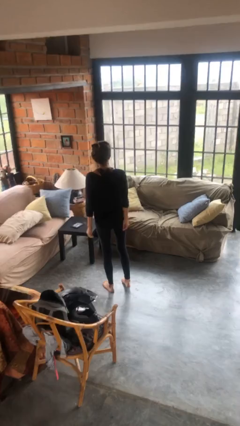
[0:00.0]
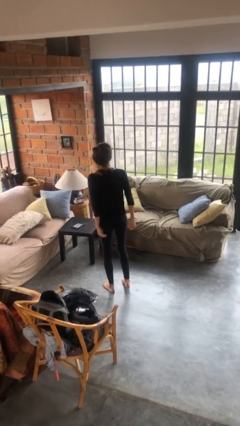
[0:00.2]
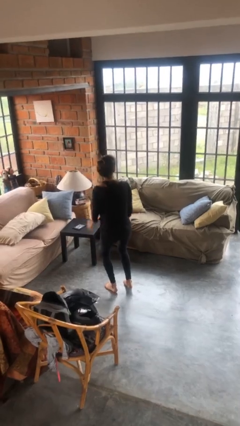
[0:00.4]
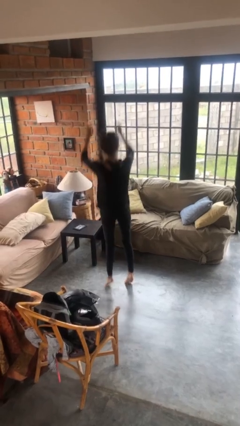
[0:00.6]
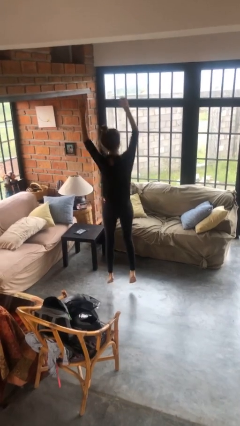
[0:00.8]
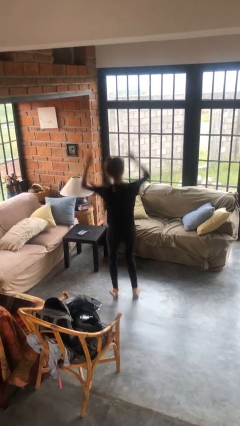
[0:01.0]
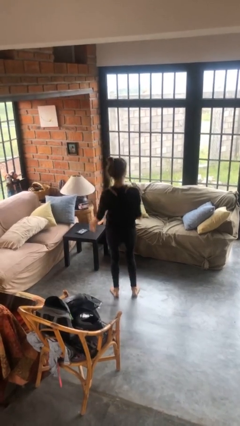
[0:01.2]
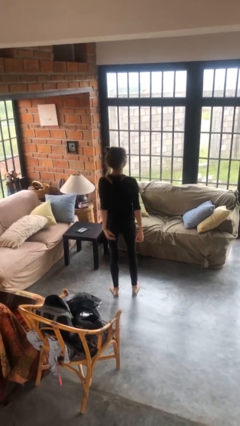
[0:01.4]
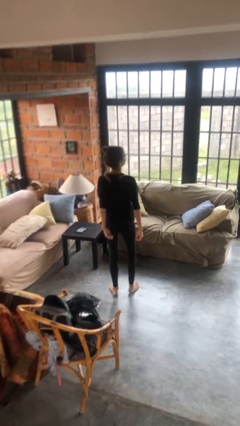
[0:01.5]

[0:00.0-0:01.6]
person jumps

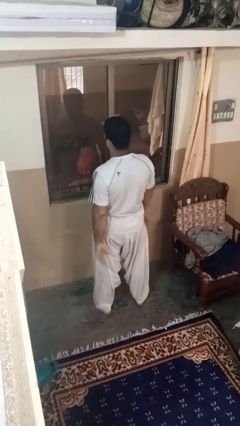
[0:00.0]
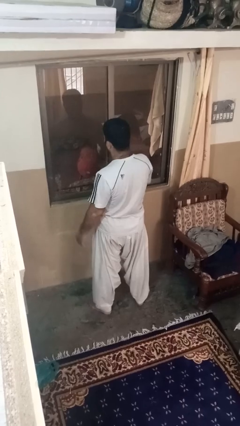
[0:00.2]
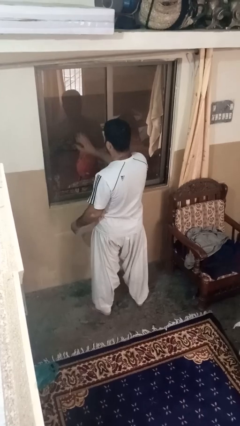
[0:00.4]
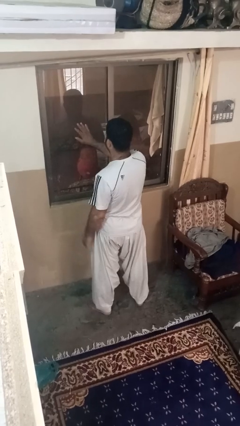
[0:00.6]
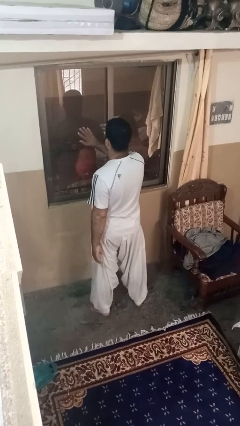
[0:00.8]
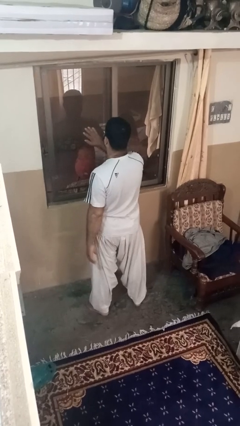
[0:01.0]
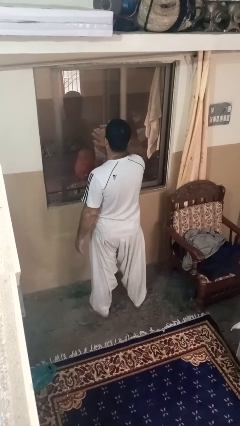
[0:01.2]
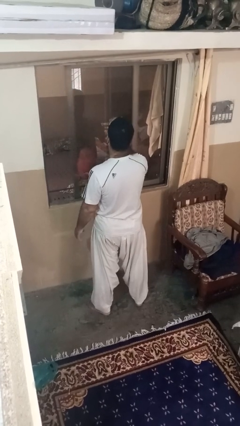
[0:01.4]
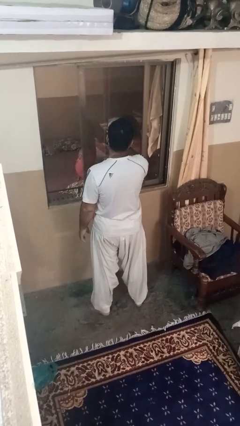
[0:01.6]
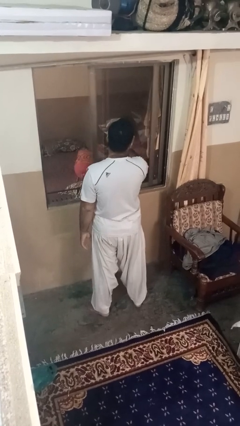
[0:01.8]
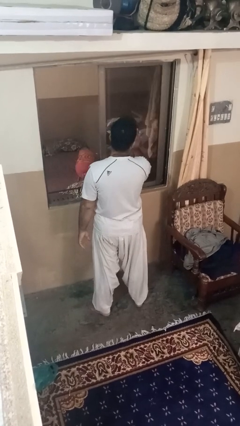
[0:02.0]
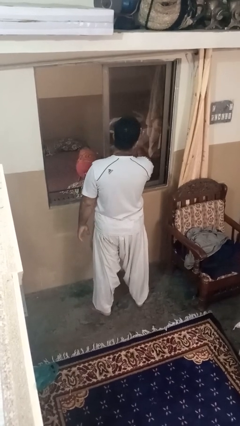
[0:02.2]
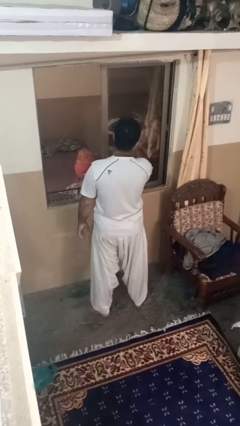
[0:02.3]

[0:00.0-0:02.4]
person opens home window

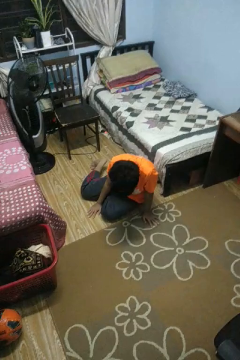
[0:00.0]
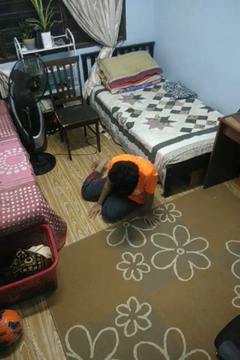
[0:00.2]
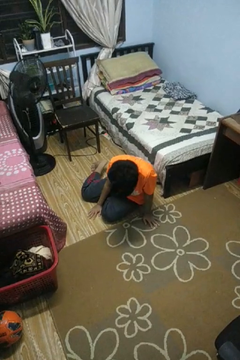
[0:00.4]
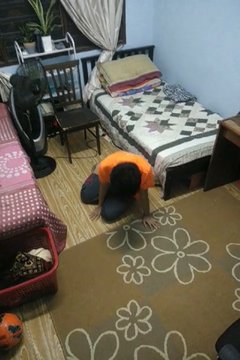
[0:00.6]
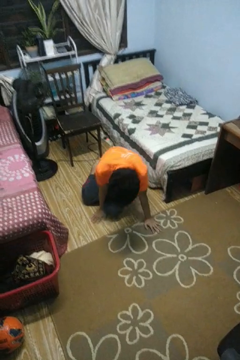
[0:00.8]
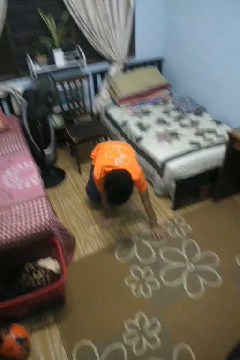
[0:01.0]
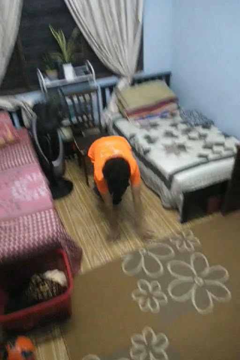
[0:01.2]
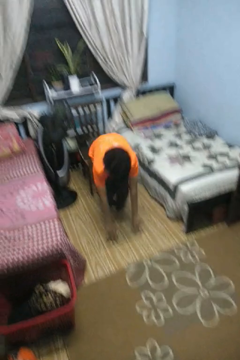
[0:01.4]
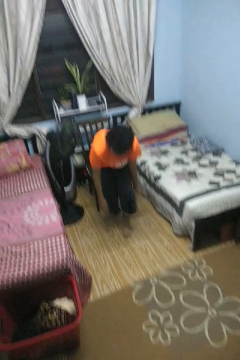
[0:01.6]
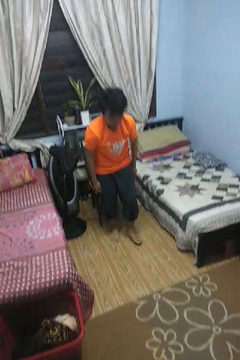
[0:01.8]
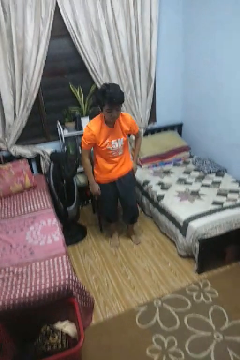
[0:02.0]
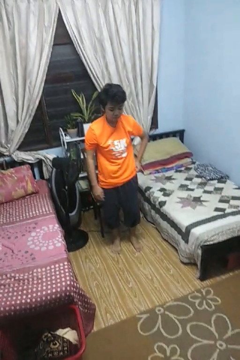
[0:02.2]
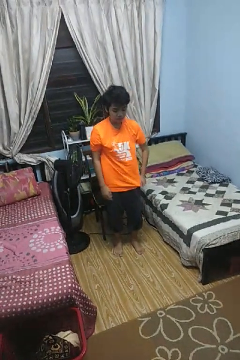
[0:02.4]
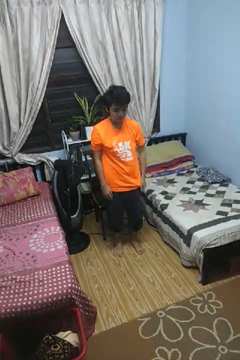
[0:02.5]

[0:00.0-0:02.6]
person stands up from floor

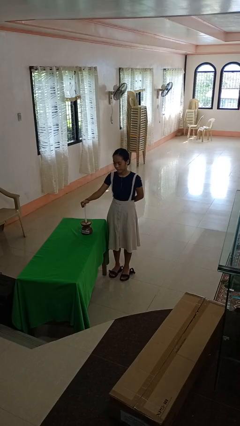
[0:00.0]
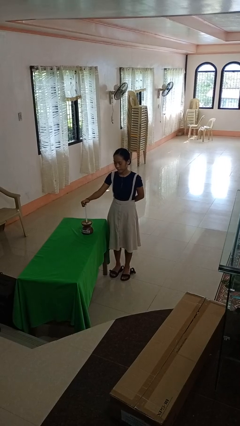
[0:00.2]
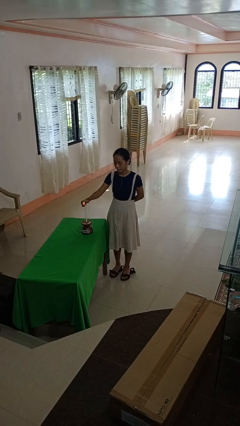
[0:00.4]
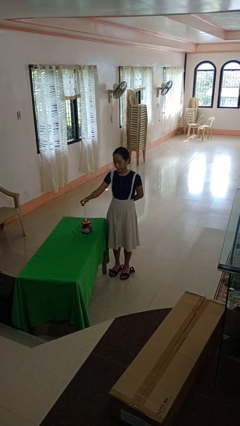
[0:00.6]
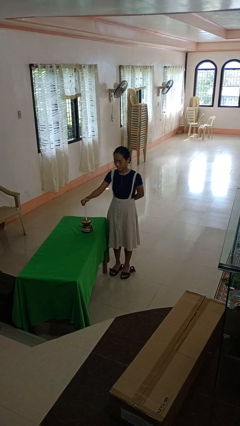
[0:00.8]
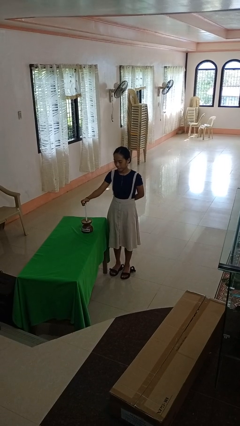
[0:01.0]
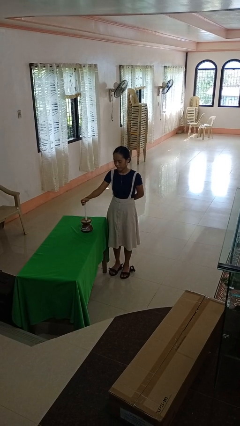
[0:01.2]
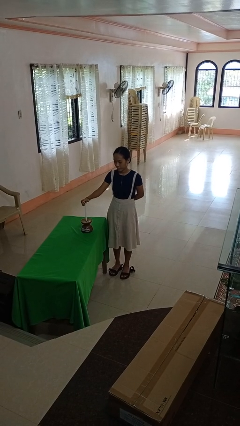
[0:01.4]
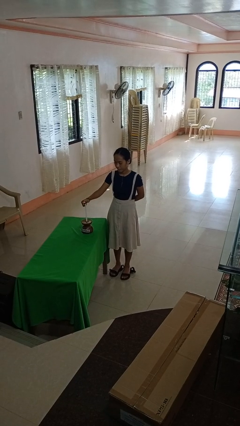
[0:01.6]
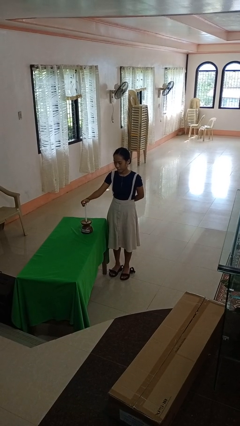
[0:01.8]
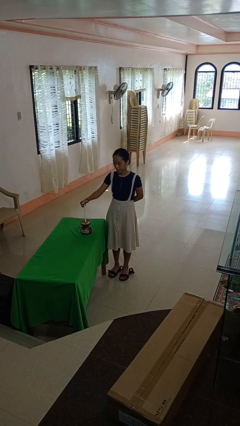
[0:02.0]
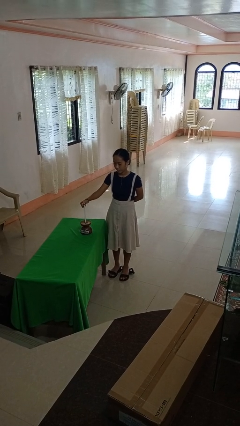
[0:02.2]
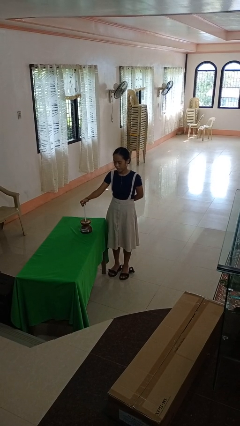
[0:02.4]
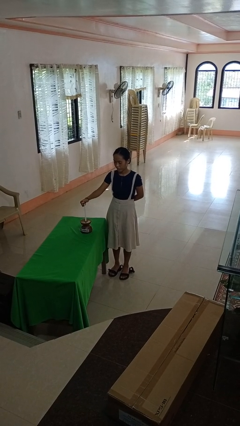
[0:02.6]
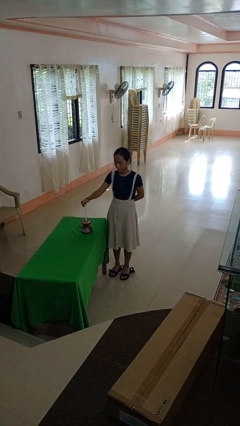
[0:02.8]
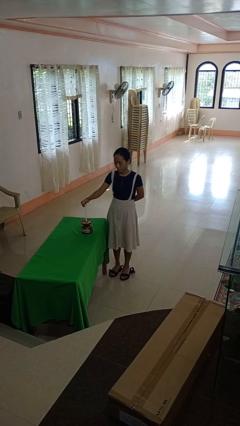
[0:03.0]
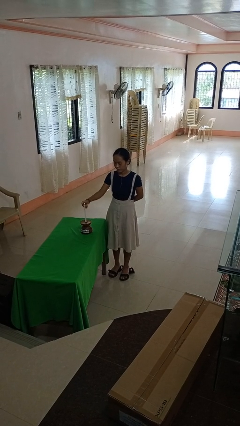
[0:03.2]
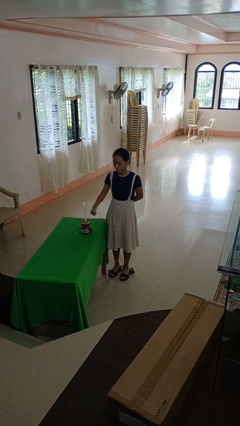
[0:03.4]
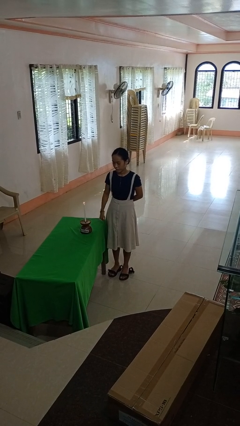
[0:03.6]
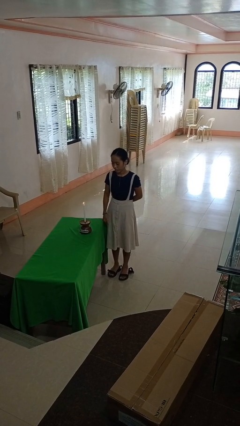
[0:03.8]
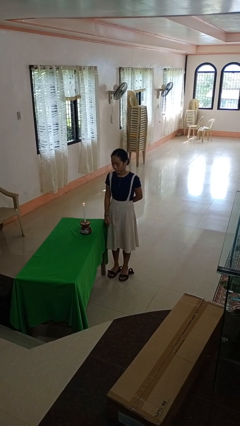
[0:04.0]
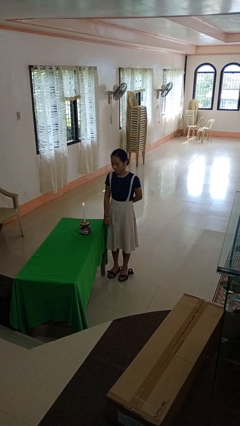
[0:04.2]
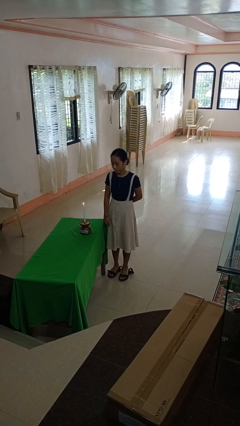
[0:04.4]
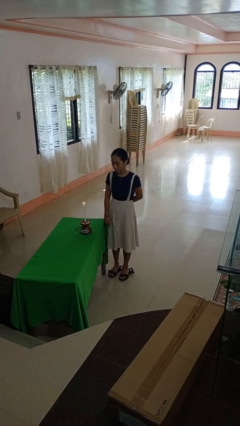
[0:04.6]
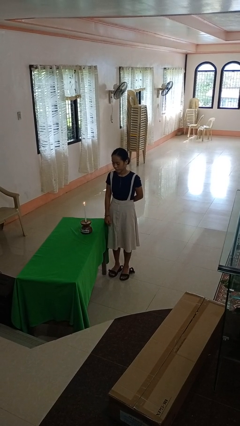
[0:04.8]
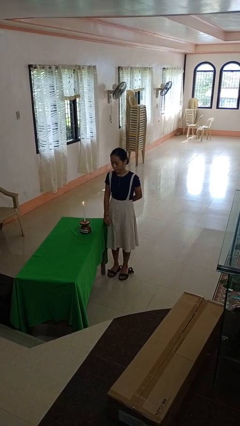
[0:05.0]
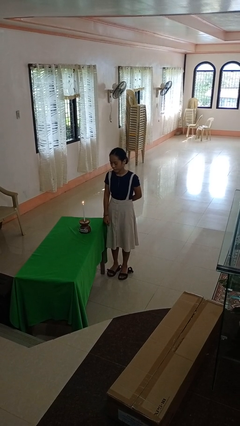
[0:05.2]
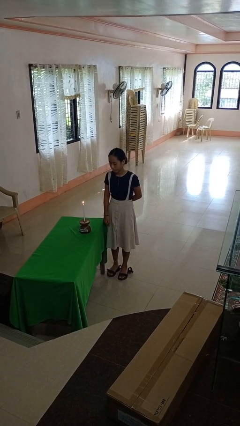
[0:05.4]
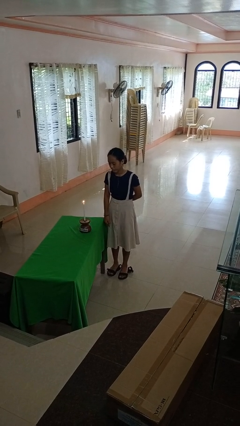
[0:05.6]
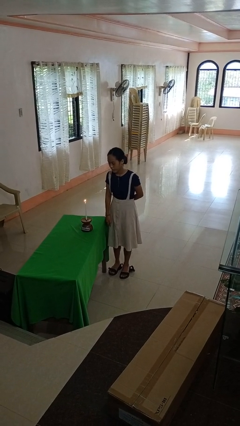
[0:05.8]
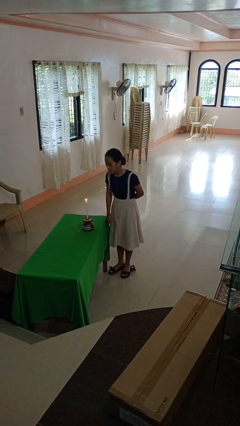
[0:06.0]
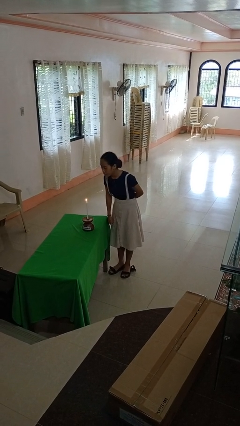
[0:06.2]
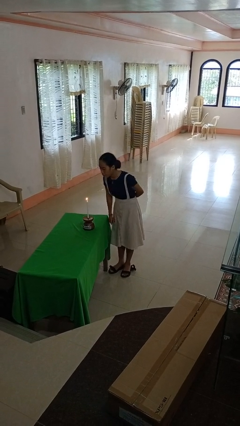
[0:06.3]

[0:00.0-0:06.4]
person lights candle

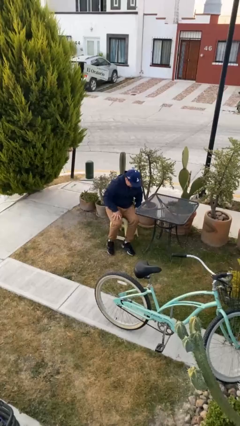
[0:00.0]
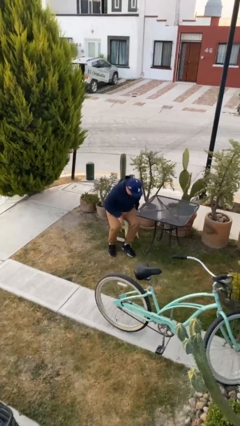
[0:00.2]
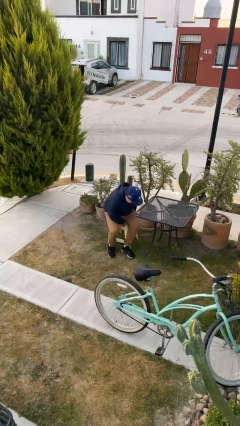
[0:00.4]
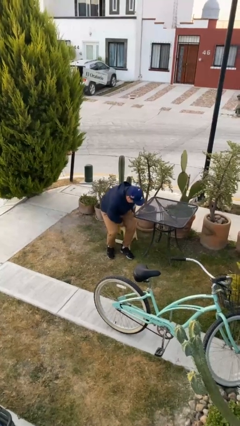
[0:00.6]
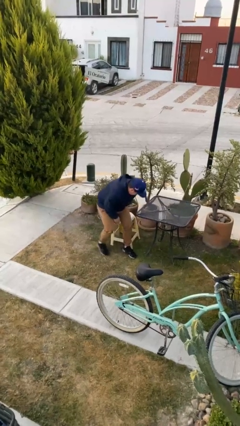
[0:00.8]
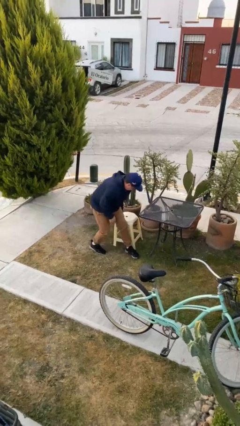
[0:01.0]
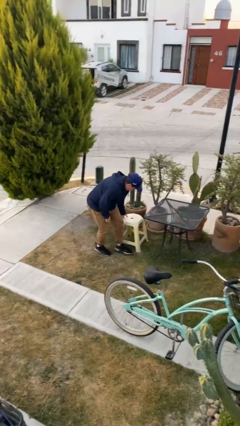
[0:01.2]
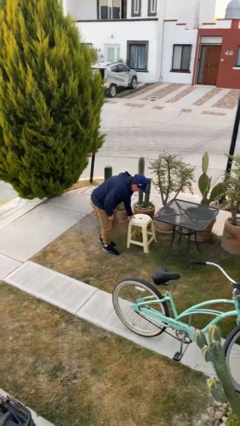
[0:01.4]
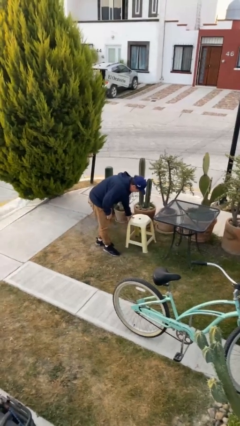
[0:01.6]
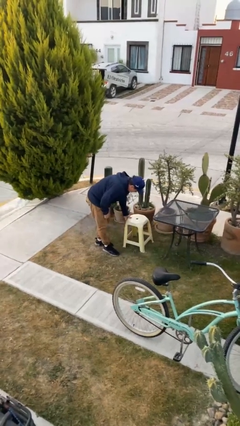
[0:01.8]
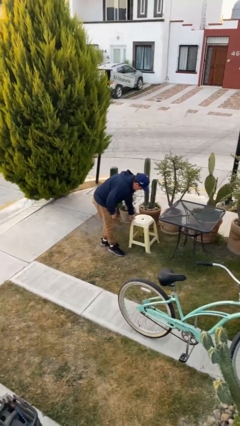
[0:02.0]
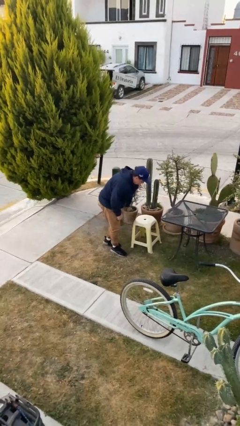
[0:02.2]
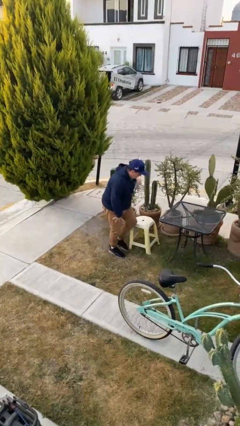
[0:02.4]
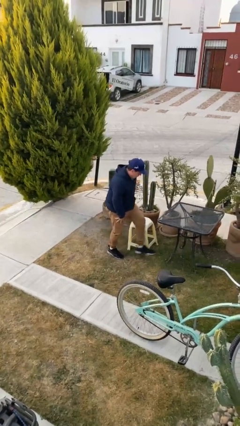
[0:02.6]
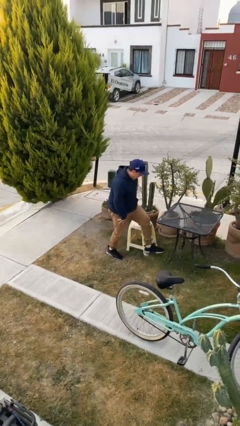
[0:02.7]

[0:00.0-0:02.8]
person stands up

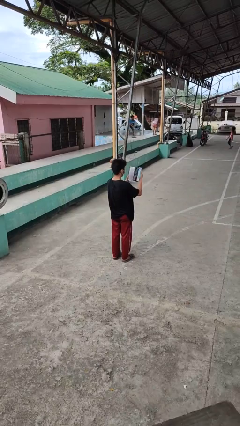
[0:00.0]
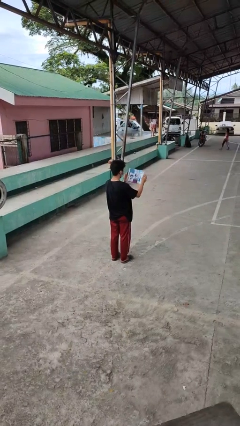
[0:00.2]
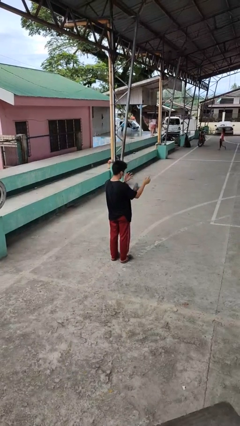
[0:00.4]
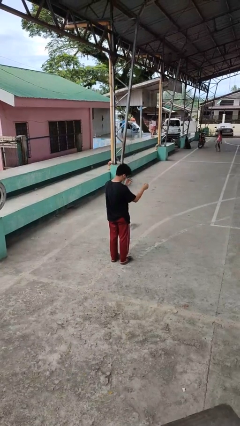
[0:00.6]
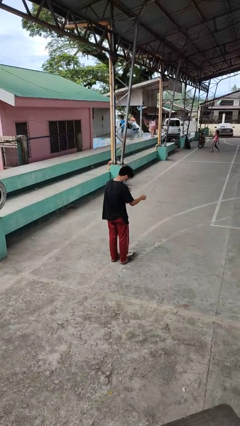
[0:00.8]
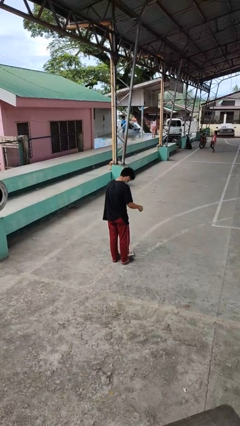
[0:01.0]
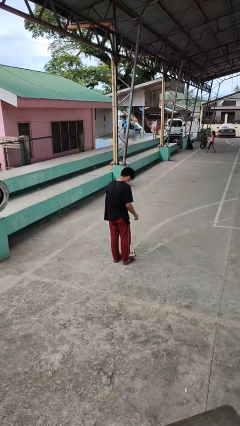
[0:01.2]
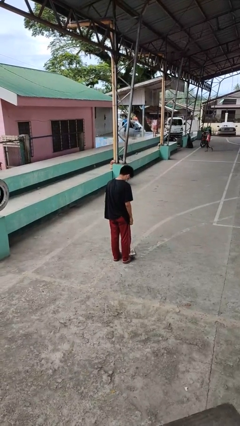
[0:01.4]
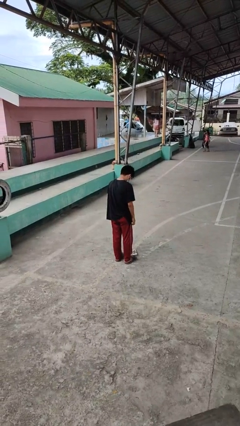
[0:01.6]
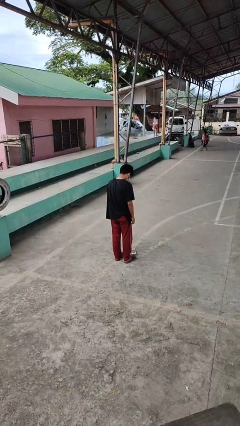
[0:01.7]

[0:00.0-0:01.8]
person drops object
